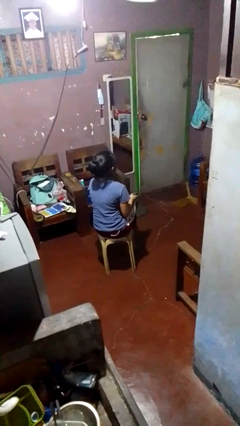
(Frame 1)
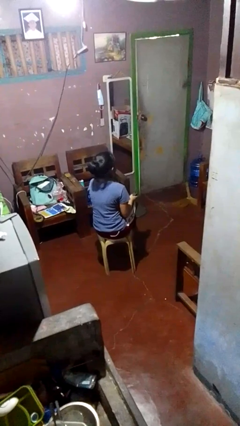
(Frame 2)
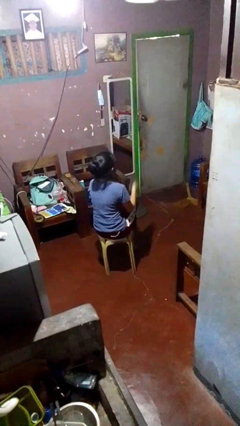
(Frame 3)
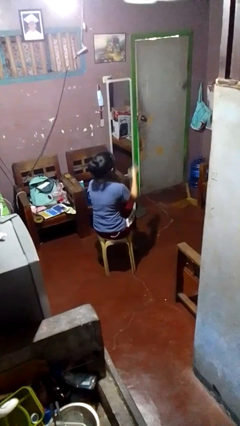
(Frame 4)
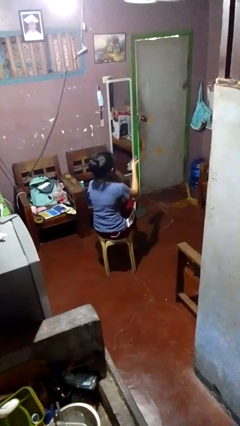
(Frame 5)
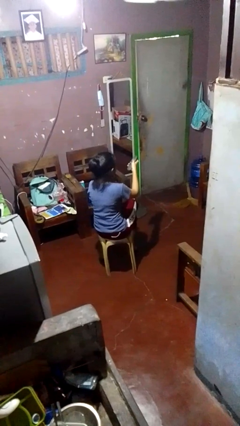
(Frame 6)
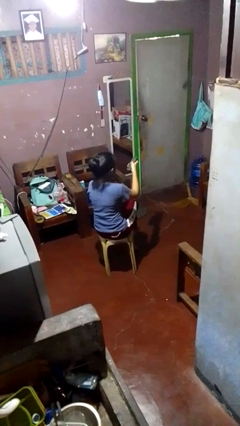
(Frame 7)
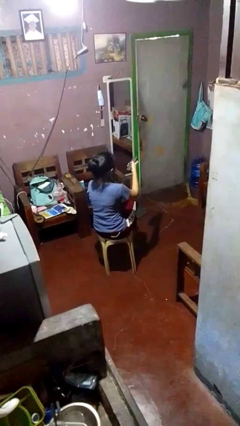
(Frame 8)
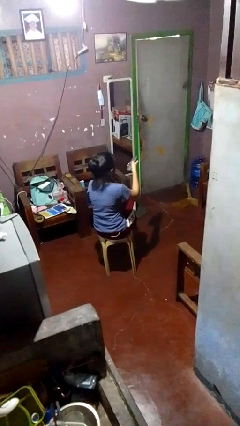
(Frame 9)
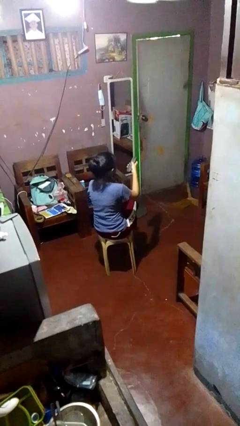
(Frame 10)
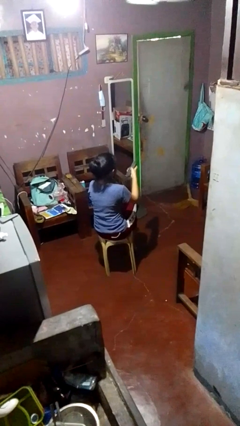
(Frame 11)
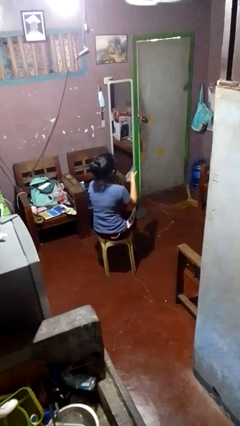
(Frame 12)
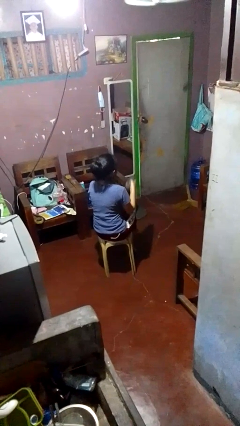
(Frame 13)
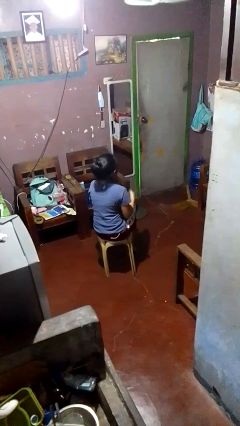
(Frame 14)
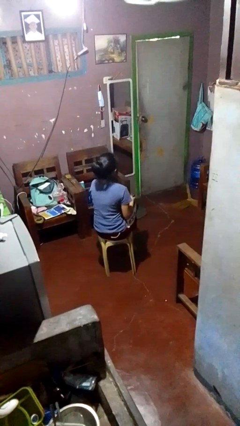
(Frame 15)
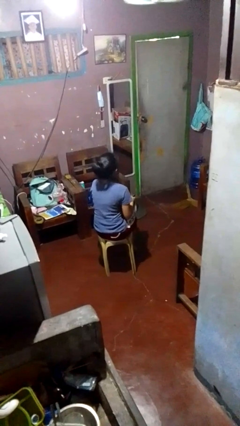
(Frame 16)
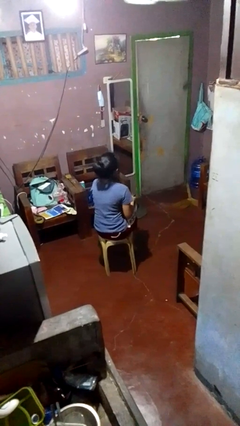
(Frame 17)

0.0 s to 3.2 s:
person uses television remote

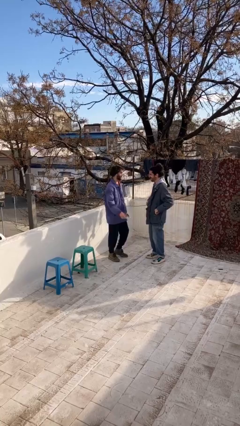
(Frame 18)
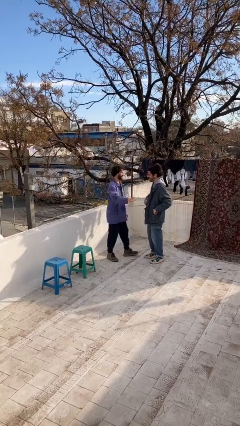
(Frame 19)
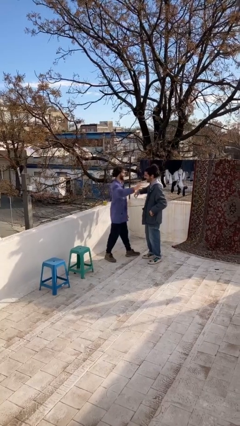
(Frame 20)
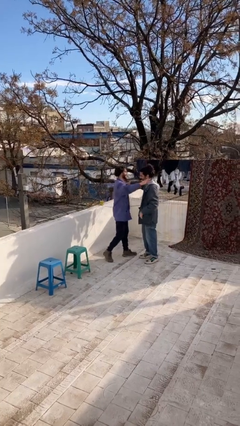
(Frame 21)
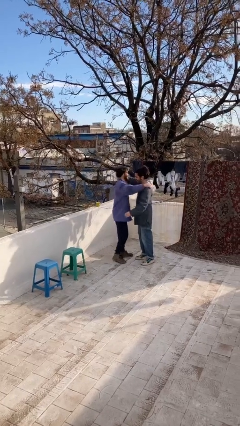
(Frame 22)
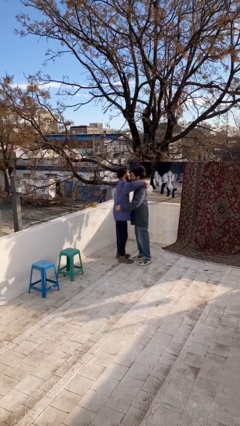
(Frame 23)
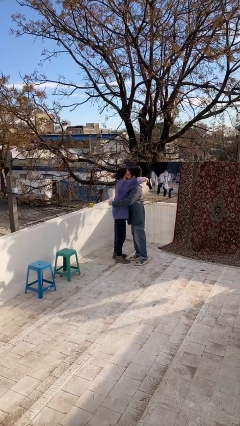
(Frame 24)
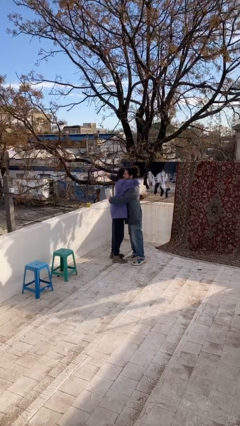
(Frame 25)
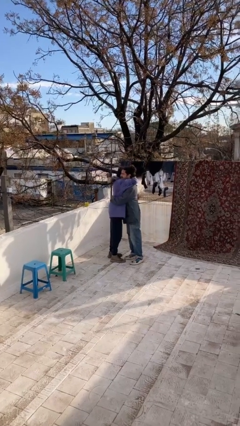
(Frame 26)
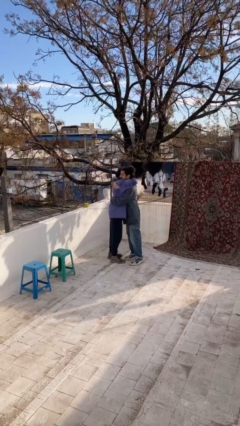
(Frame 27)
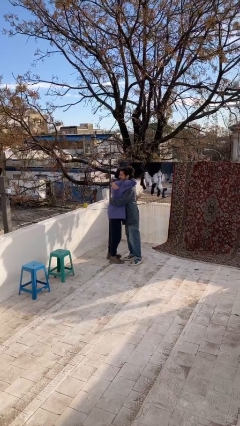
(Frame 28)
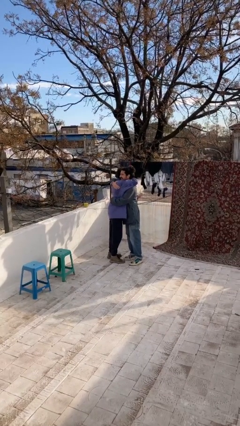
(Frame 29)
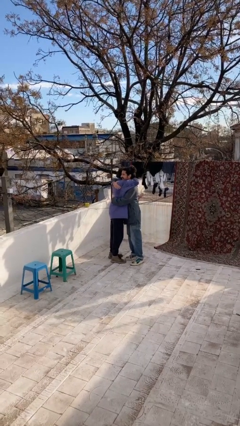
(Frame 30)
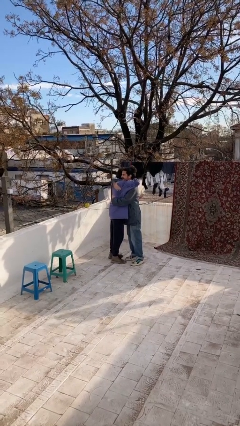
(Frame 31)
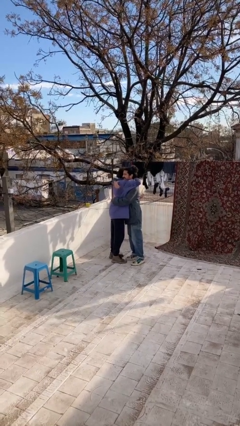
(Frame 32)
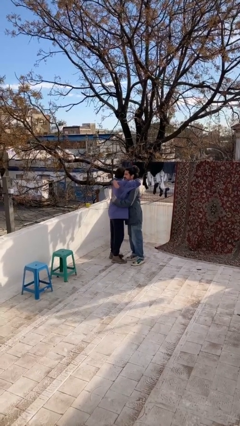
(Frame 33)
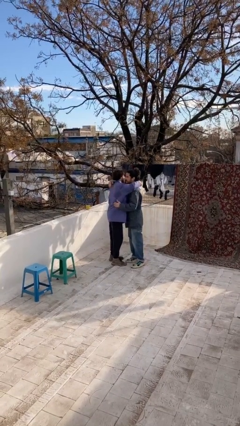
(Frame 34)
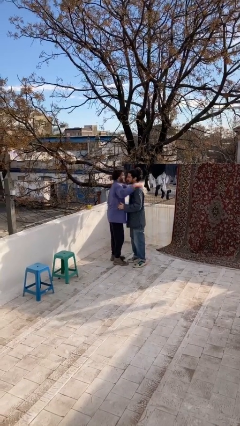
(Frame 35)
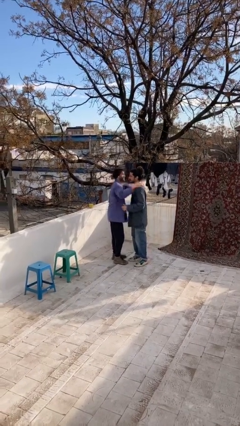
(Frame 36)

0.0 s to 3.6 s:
person embraces person

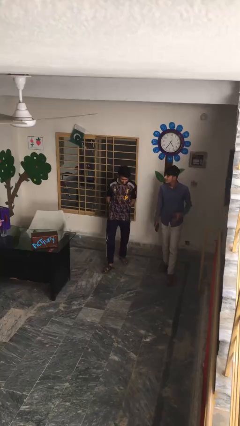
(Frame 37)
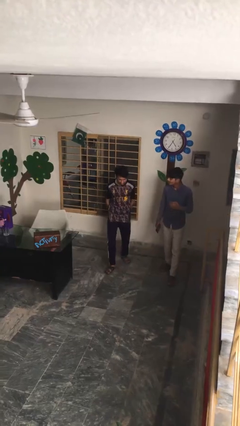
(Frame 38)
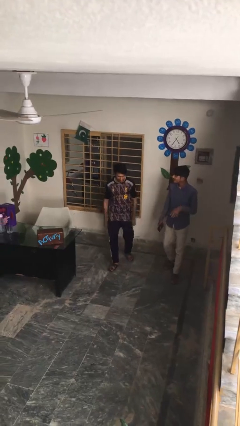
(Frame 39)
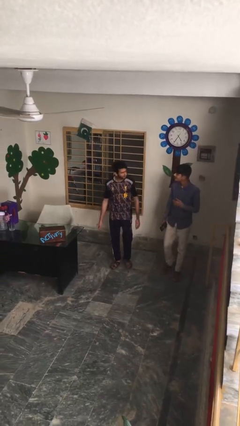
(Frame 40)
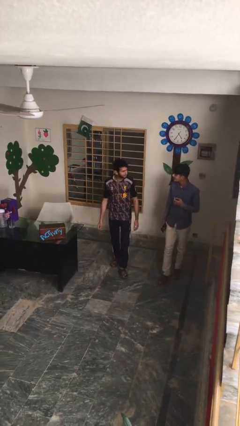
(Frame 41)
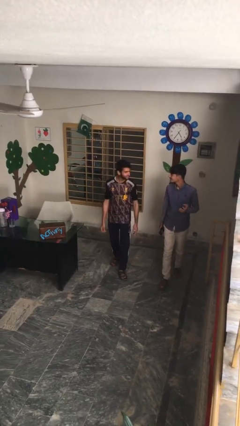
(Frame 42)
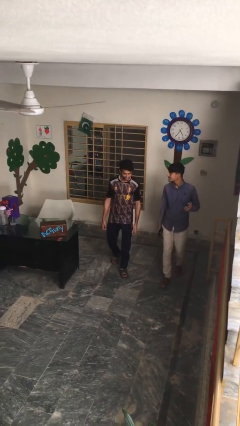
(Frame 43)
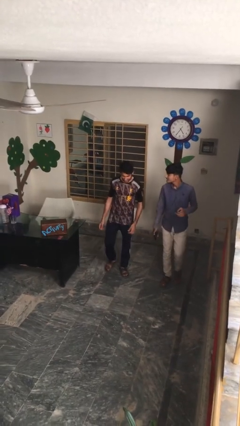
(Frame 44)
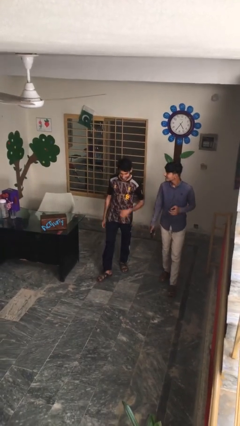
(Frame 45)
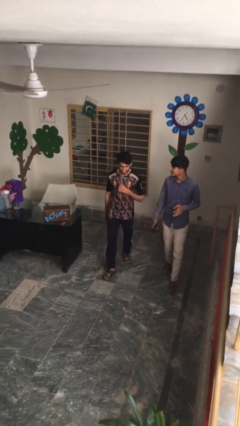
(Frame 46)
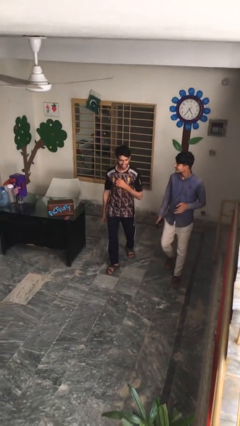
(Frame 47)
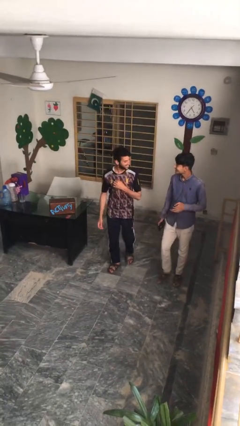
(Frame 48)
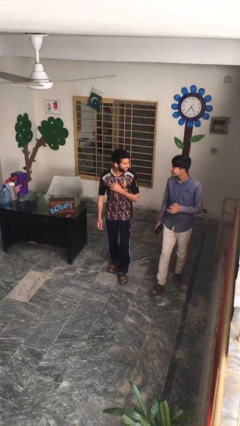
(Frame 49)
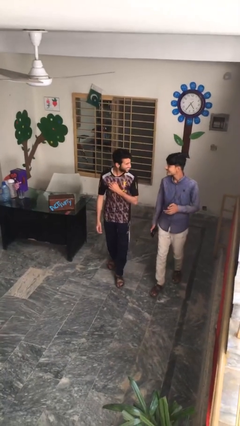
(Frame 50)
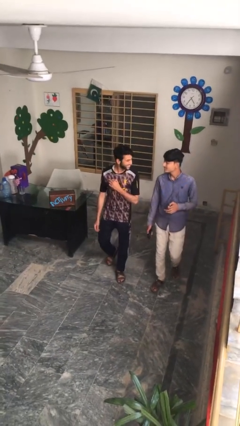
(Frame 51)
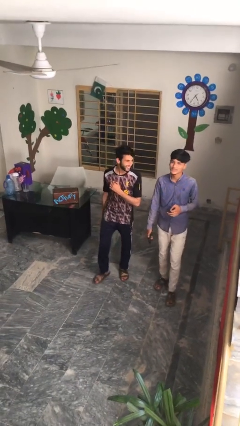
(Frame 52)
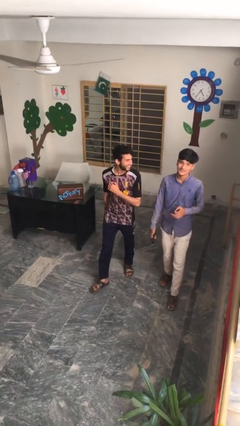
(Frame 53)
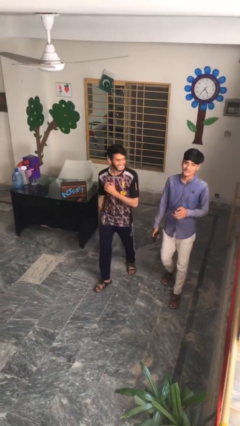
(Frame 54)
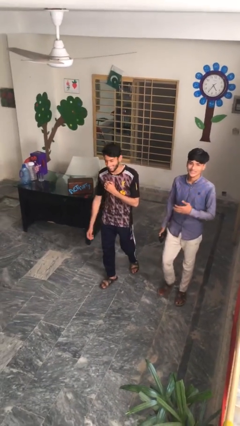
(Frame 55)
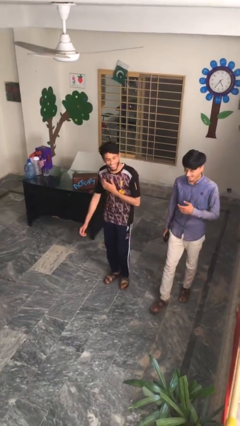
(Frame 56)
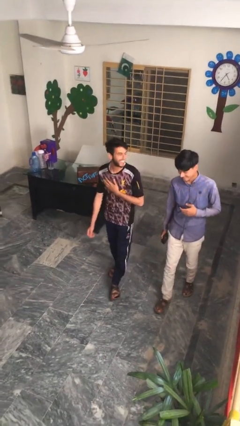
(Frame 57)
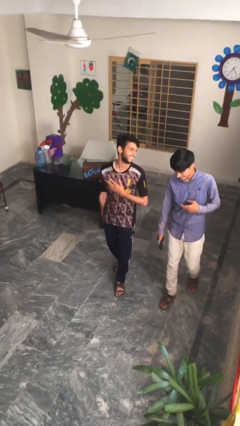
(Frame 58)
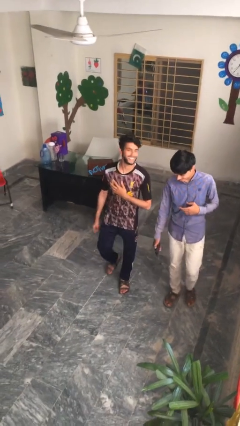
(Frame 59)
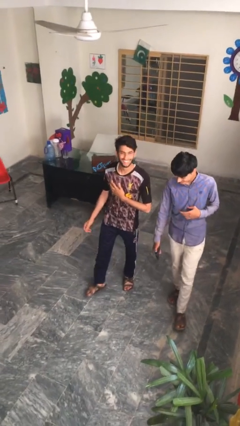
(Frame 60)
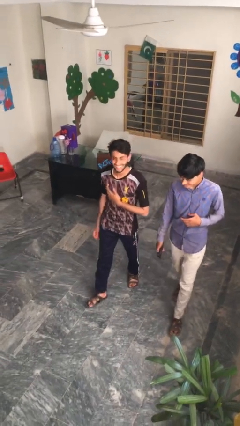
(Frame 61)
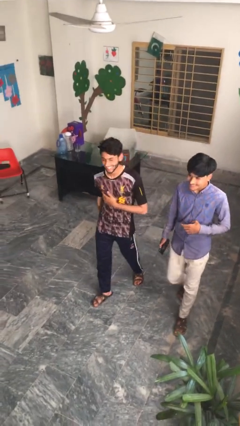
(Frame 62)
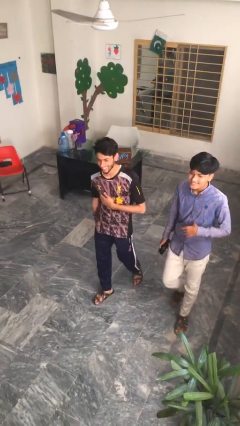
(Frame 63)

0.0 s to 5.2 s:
person talks to person

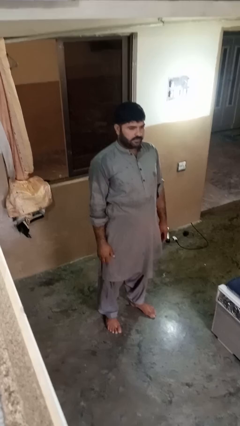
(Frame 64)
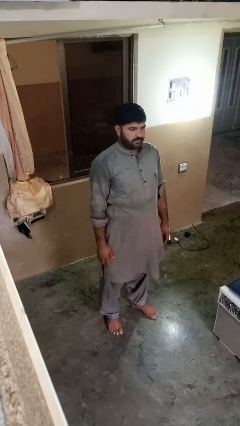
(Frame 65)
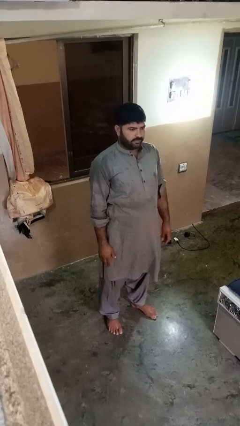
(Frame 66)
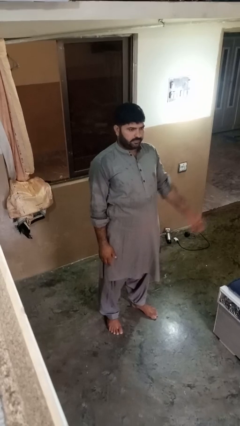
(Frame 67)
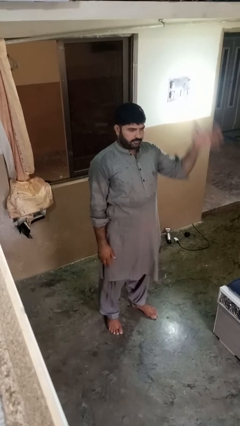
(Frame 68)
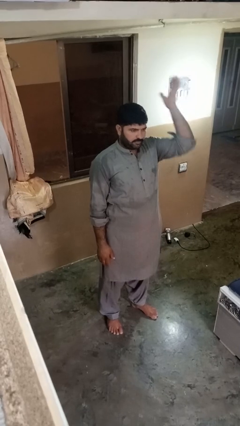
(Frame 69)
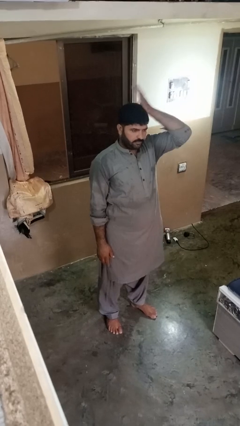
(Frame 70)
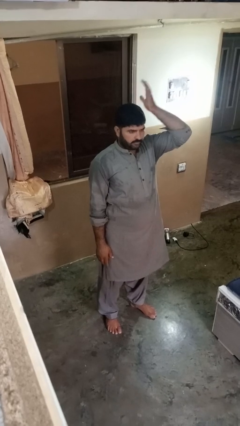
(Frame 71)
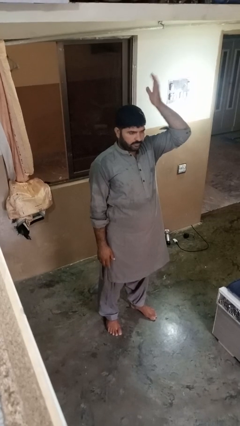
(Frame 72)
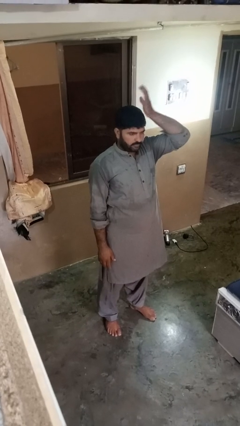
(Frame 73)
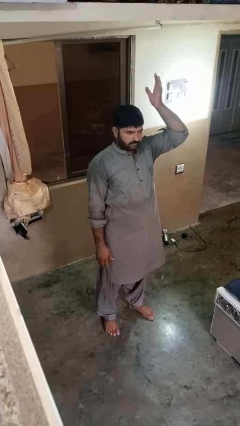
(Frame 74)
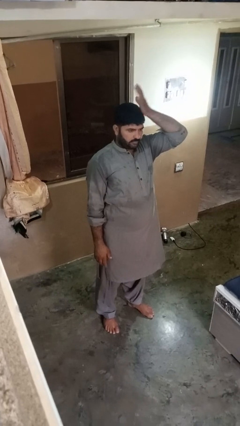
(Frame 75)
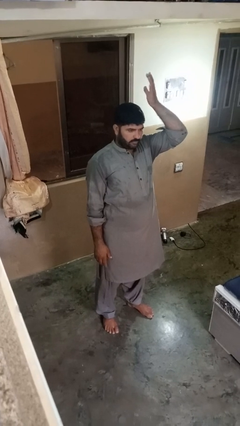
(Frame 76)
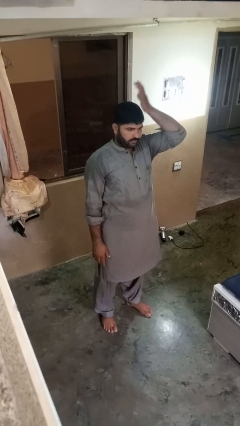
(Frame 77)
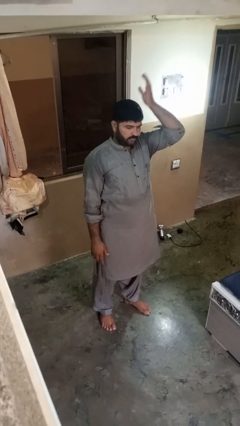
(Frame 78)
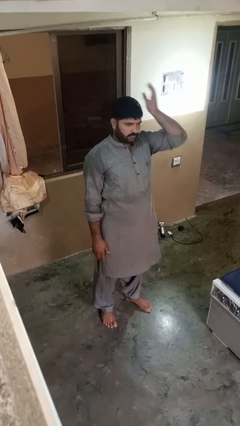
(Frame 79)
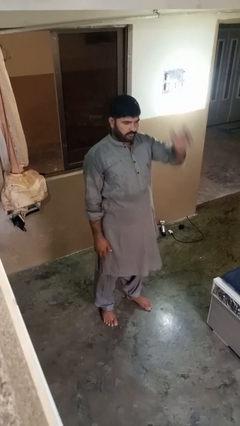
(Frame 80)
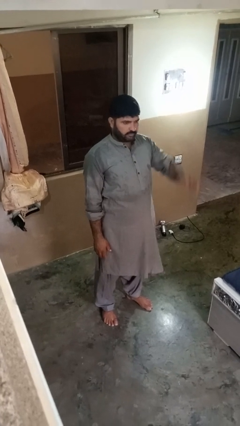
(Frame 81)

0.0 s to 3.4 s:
person pats head

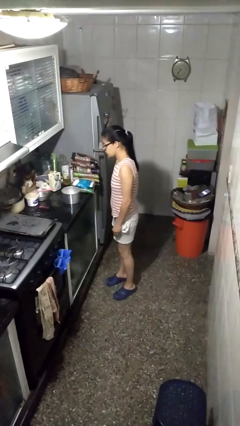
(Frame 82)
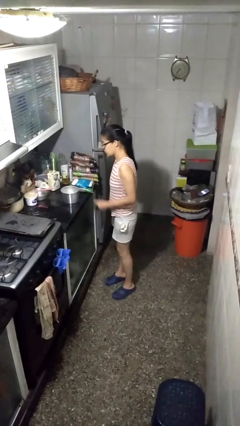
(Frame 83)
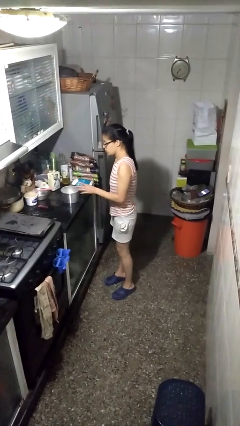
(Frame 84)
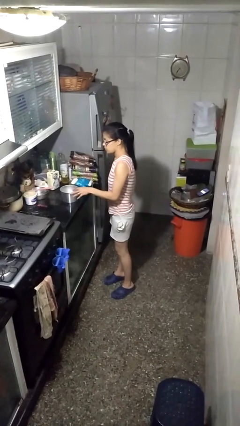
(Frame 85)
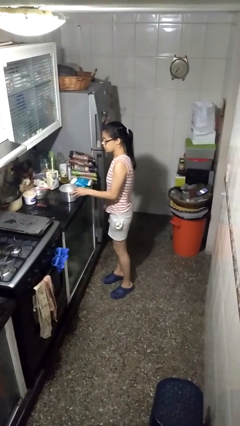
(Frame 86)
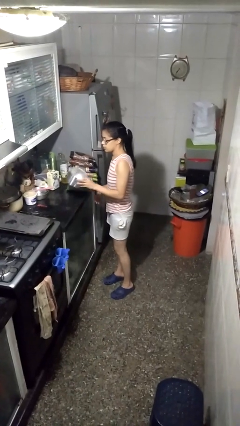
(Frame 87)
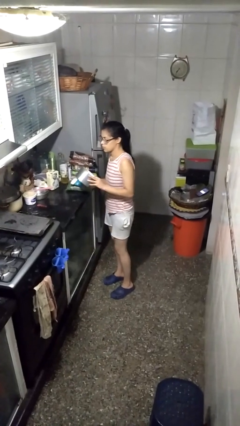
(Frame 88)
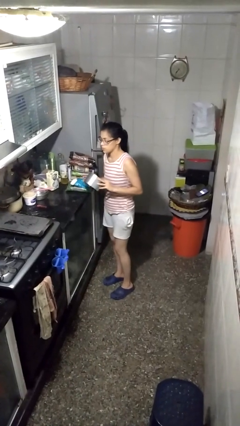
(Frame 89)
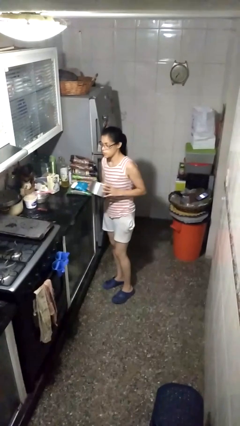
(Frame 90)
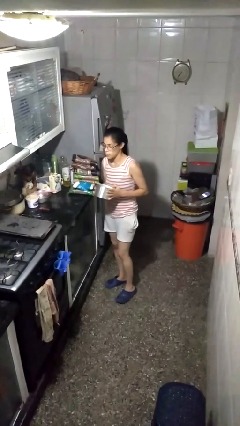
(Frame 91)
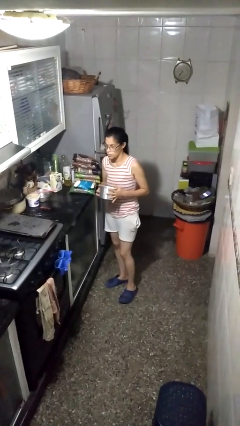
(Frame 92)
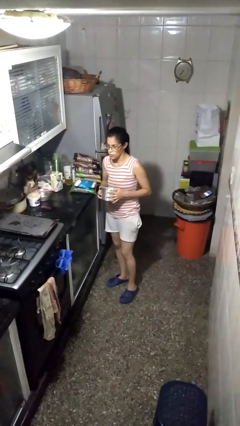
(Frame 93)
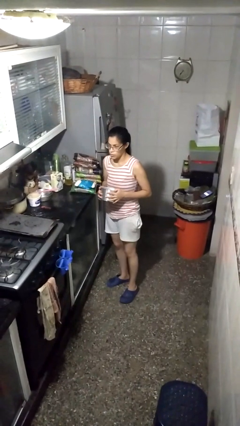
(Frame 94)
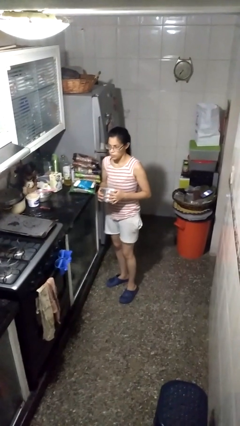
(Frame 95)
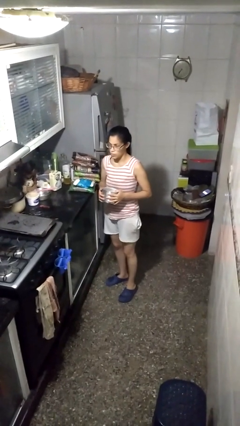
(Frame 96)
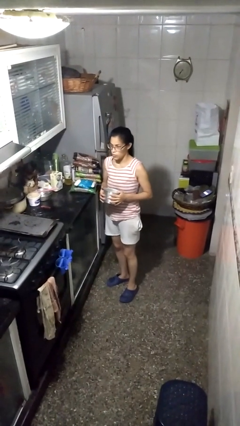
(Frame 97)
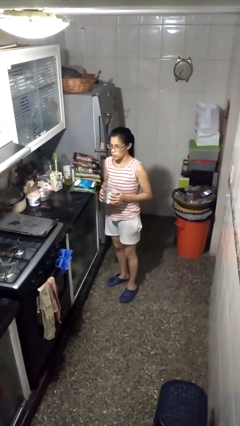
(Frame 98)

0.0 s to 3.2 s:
person picks up object from countertop
